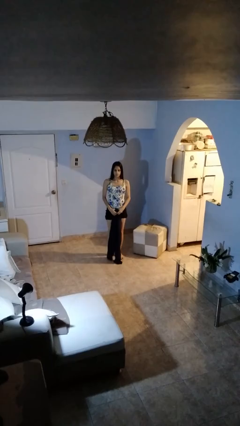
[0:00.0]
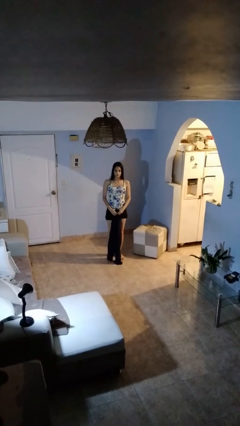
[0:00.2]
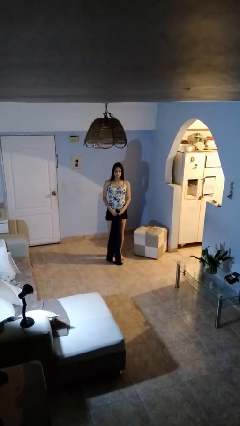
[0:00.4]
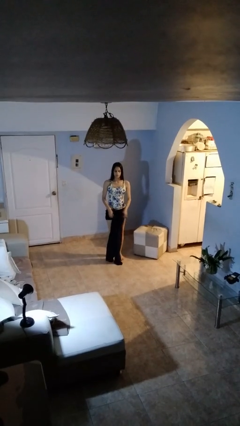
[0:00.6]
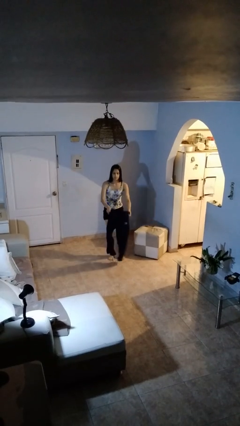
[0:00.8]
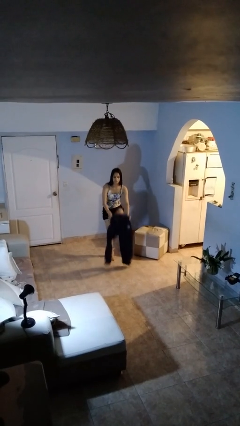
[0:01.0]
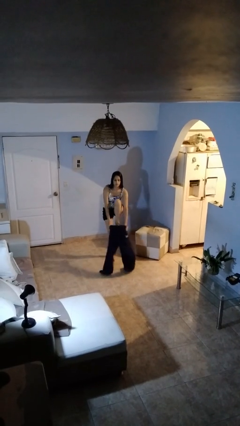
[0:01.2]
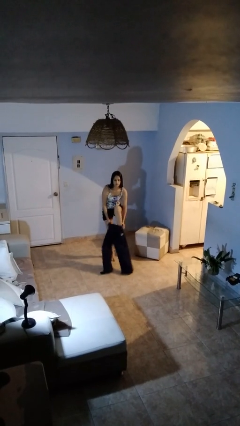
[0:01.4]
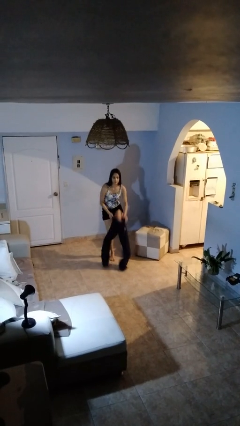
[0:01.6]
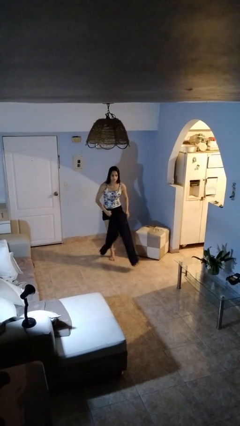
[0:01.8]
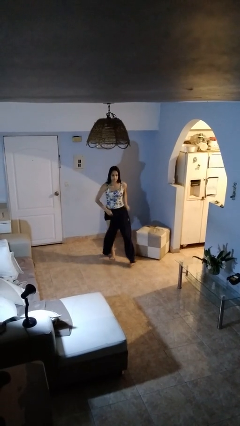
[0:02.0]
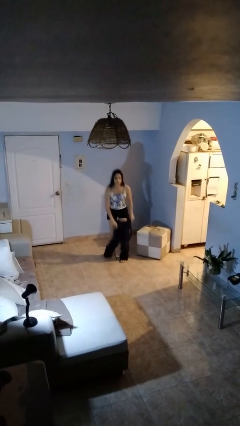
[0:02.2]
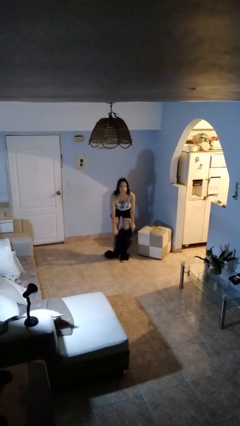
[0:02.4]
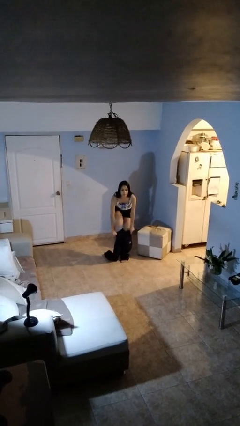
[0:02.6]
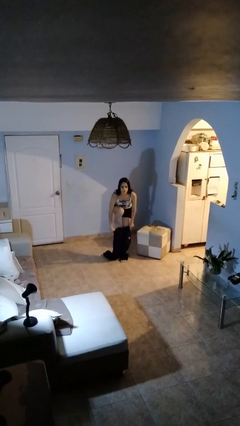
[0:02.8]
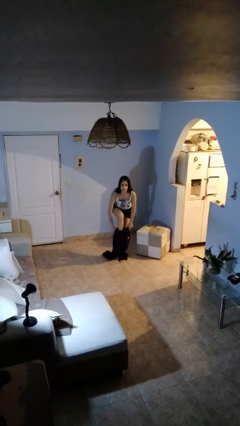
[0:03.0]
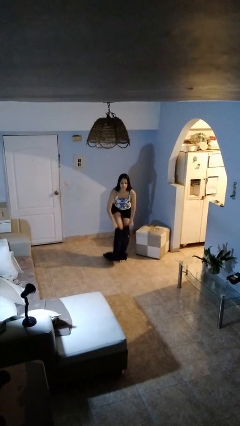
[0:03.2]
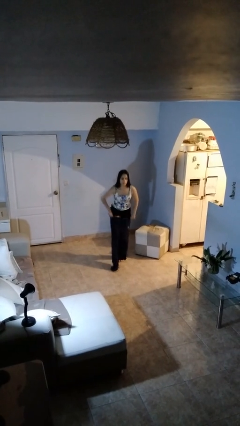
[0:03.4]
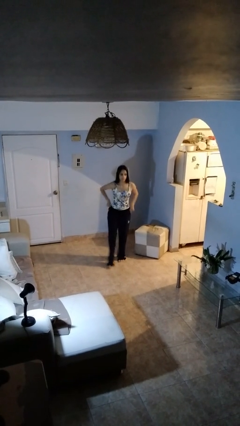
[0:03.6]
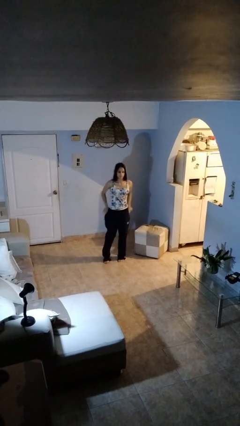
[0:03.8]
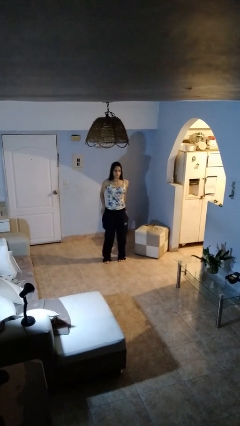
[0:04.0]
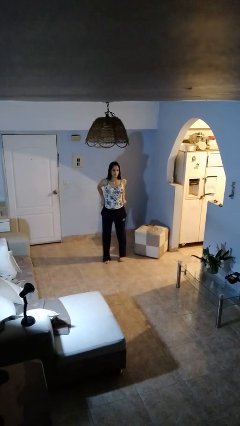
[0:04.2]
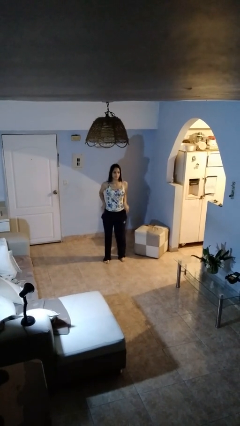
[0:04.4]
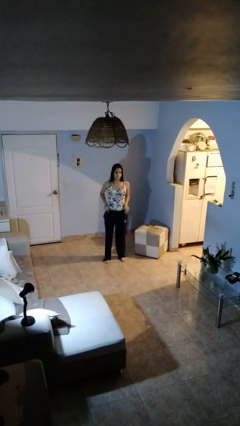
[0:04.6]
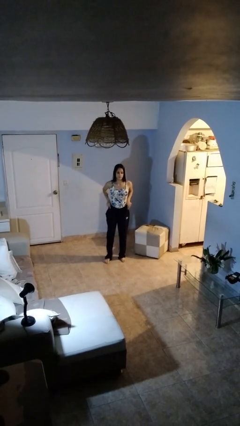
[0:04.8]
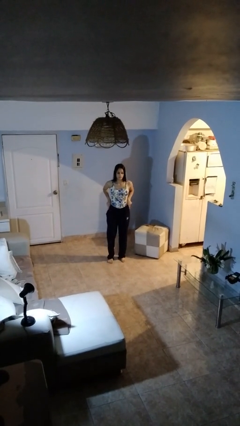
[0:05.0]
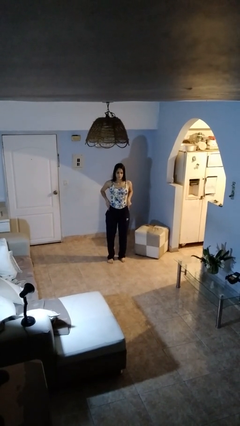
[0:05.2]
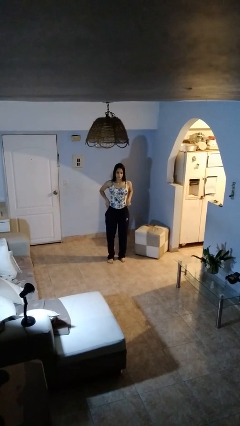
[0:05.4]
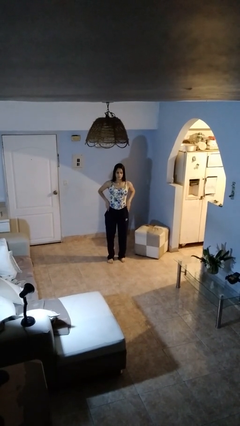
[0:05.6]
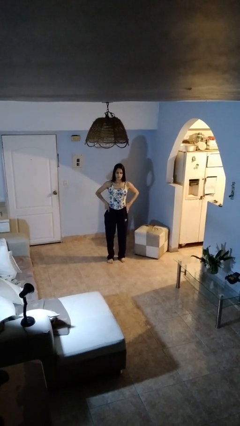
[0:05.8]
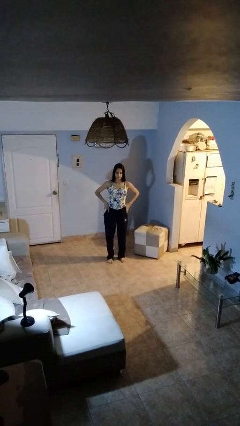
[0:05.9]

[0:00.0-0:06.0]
person takes off pants

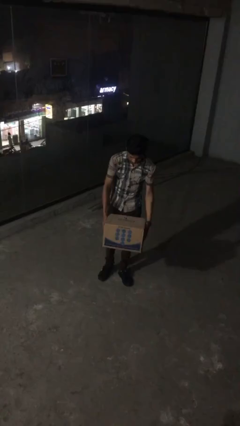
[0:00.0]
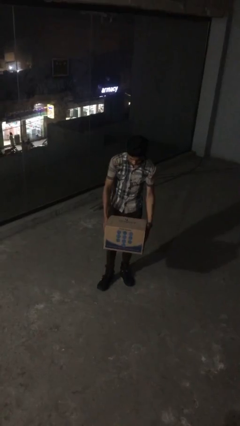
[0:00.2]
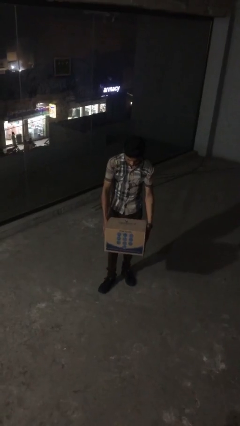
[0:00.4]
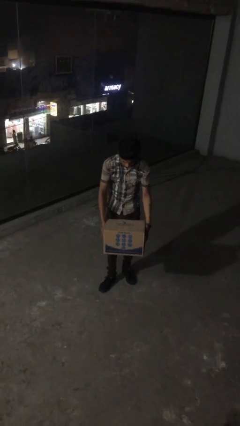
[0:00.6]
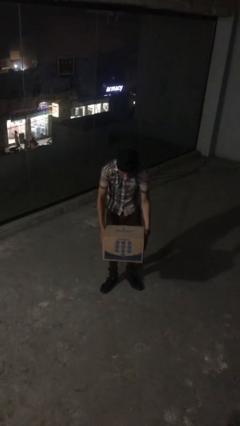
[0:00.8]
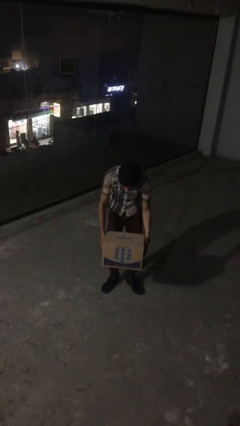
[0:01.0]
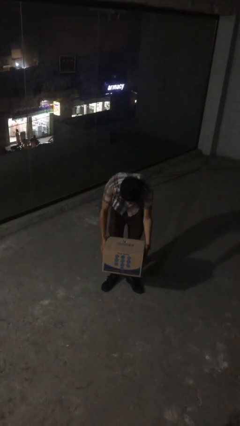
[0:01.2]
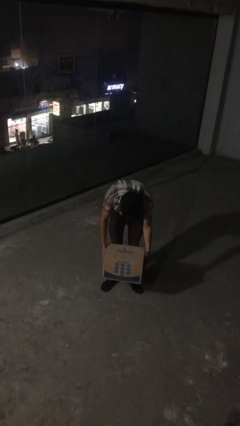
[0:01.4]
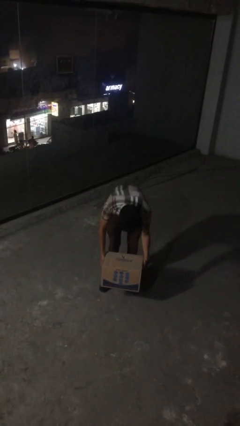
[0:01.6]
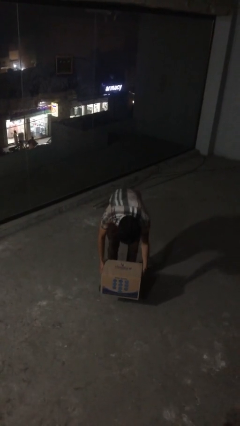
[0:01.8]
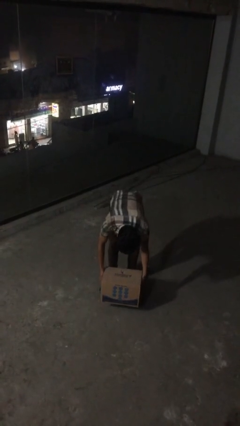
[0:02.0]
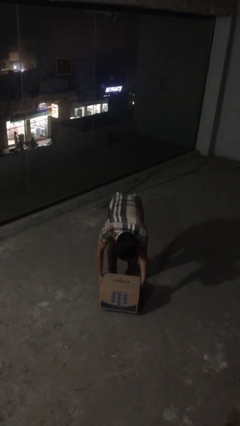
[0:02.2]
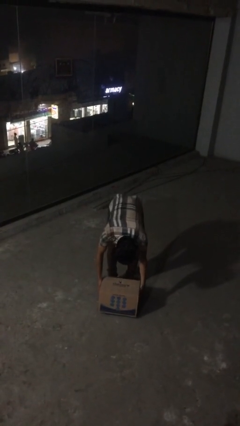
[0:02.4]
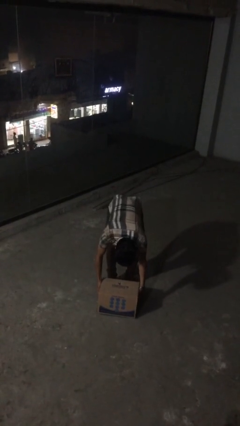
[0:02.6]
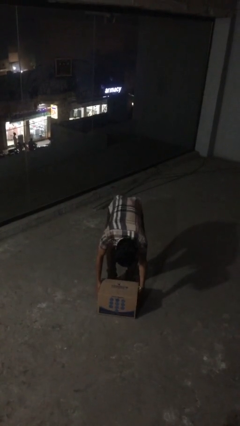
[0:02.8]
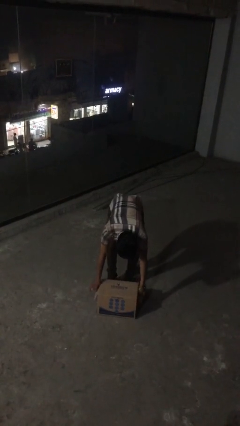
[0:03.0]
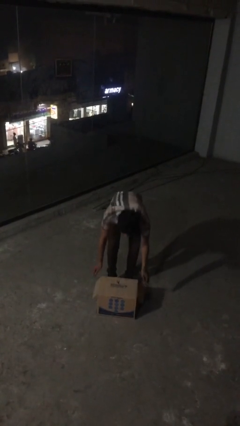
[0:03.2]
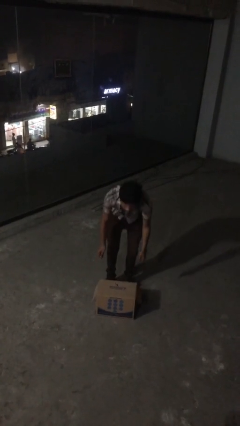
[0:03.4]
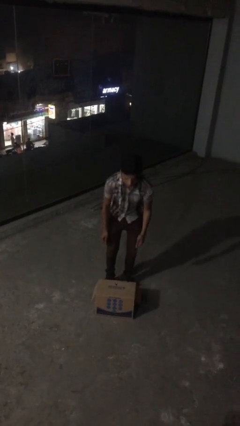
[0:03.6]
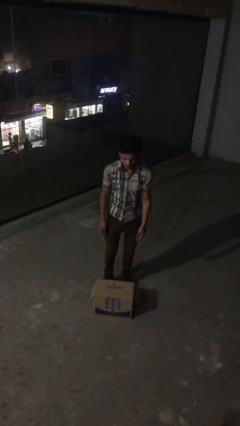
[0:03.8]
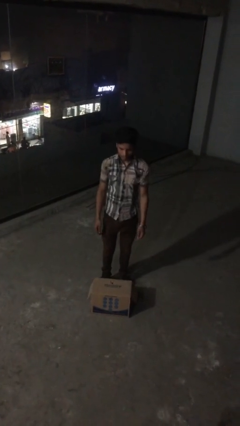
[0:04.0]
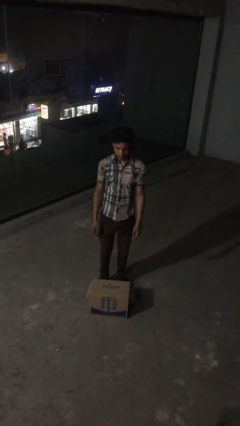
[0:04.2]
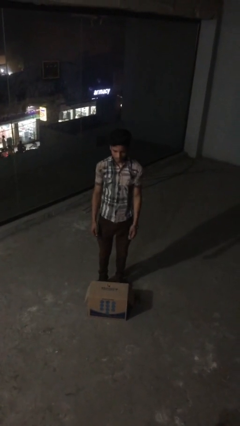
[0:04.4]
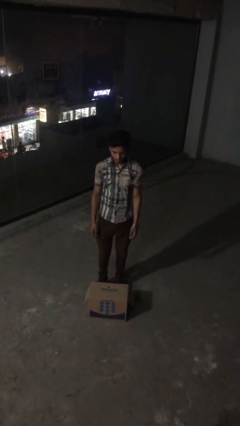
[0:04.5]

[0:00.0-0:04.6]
person puts down object on floor

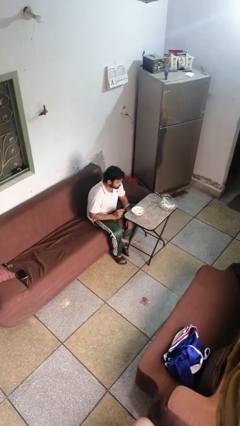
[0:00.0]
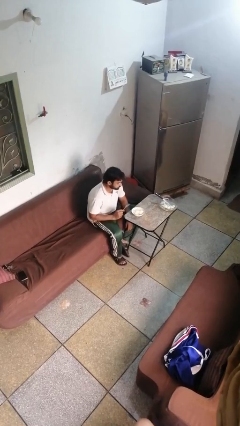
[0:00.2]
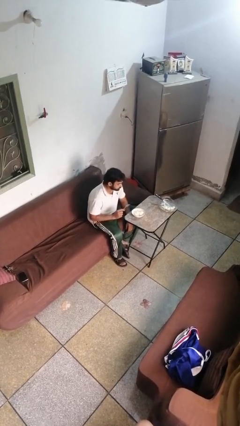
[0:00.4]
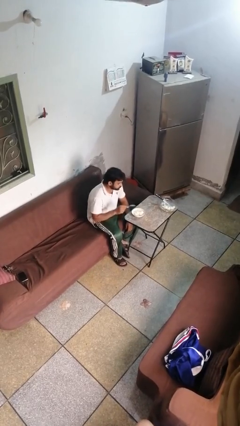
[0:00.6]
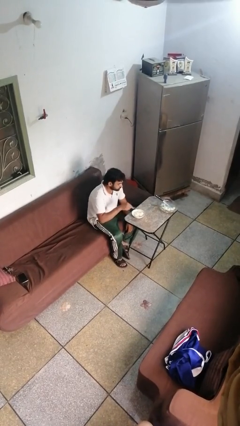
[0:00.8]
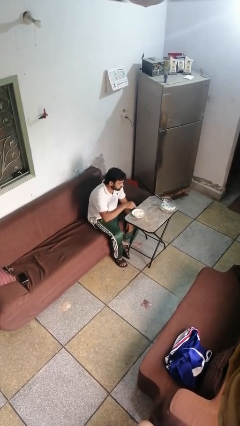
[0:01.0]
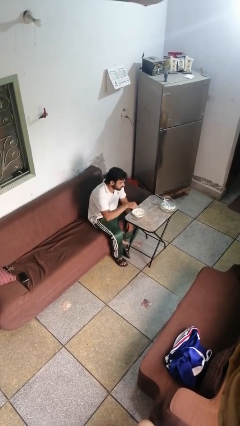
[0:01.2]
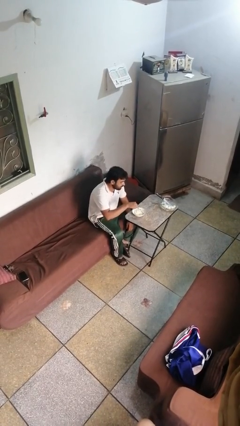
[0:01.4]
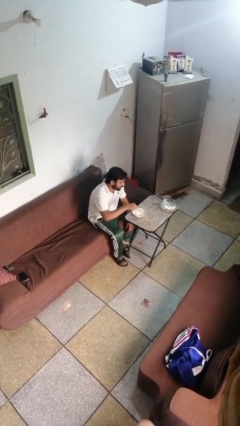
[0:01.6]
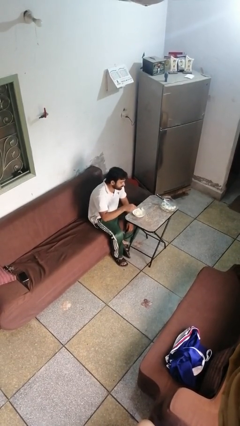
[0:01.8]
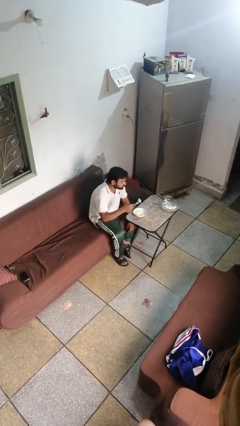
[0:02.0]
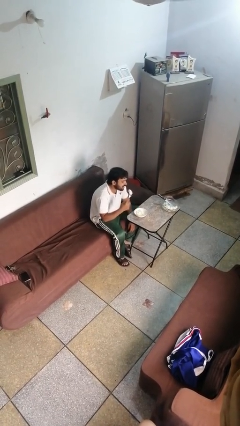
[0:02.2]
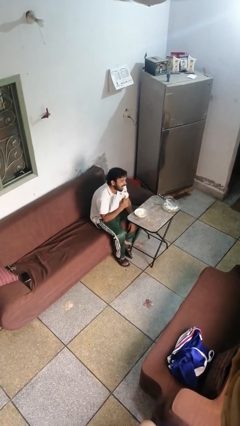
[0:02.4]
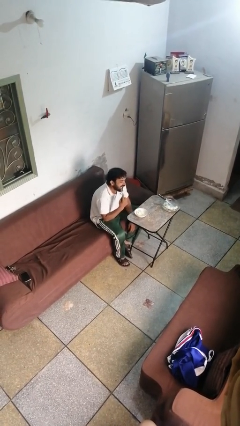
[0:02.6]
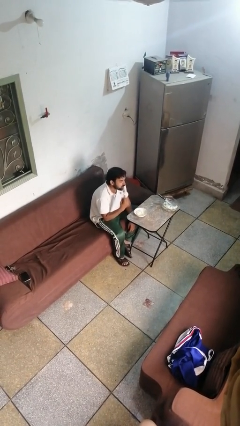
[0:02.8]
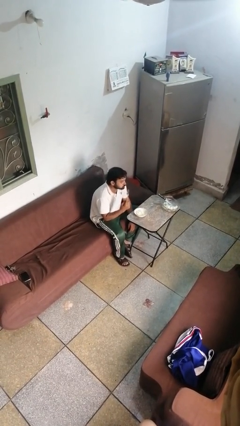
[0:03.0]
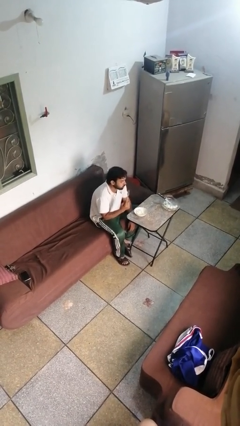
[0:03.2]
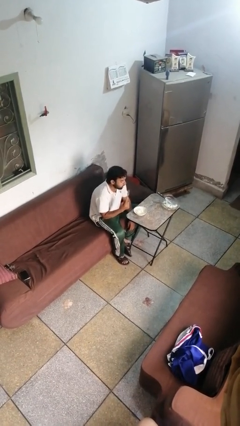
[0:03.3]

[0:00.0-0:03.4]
person eats with utensil

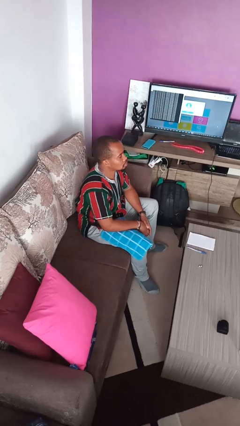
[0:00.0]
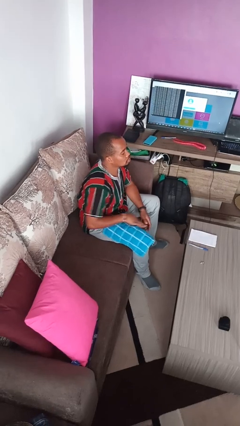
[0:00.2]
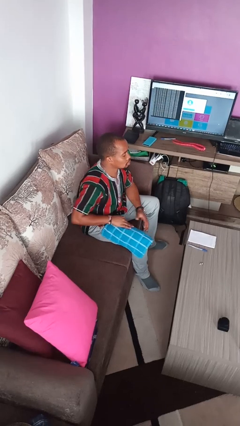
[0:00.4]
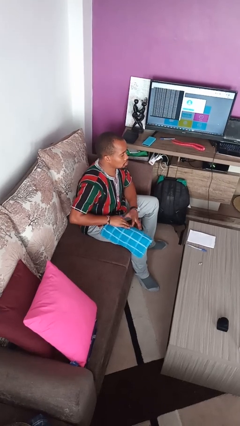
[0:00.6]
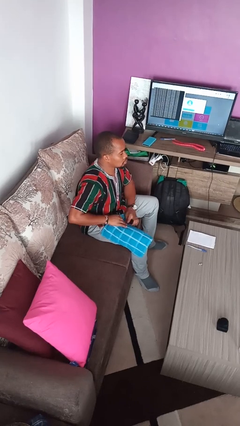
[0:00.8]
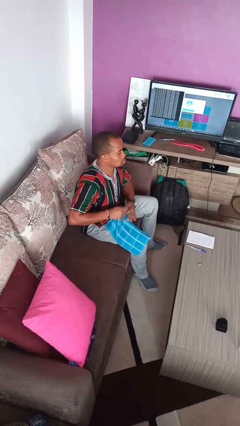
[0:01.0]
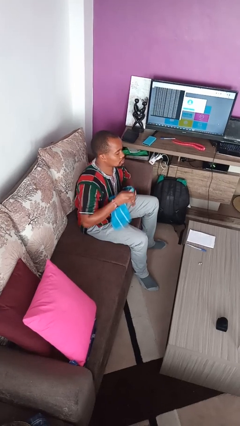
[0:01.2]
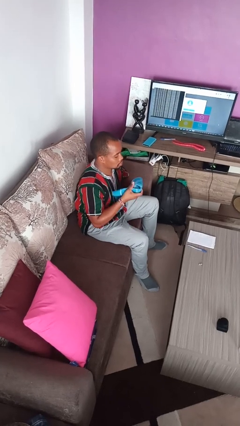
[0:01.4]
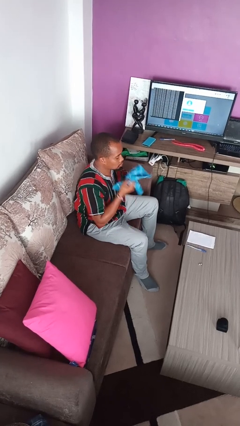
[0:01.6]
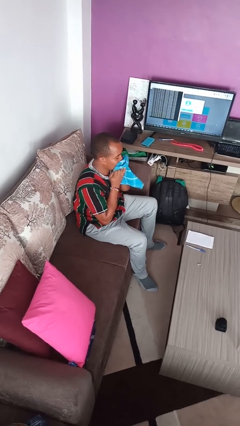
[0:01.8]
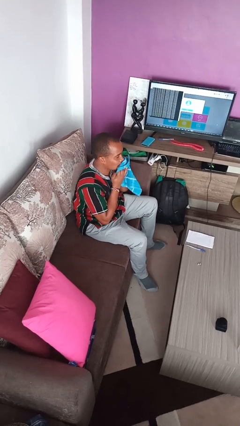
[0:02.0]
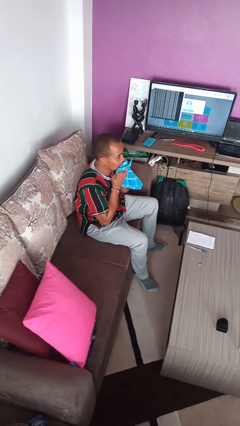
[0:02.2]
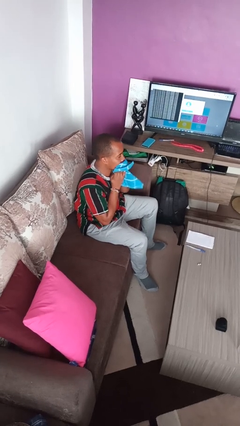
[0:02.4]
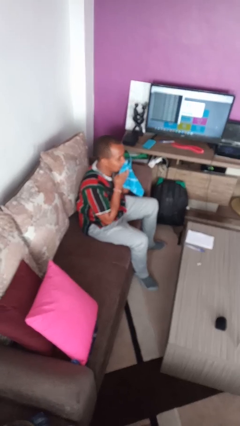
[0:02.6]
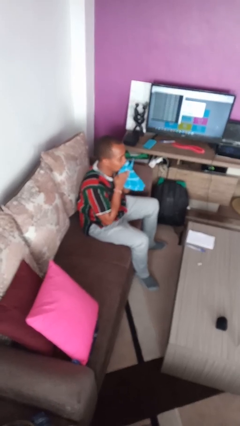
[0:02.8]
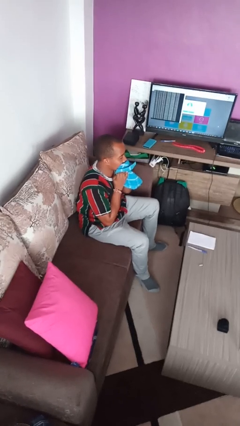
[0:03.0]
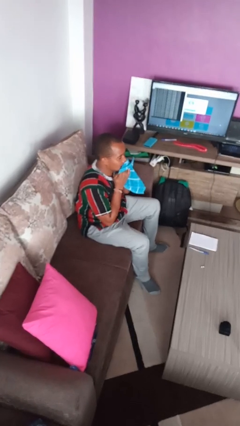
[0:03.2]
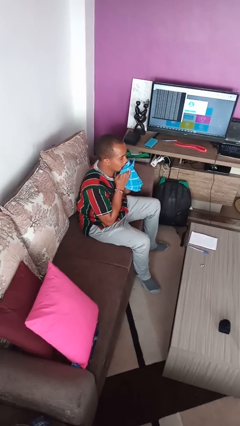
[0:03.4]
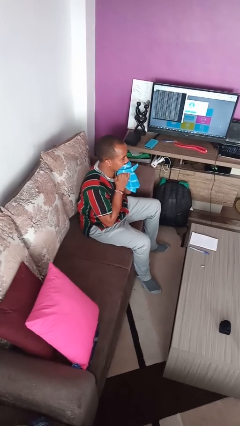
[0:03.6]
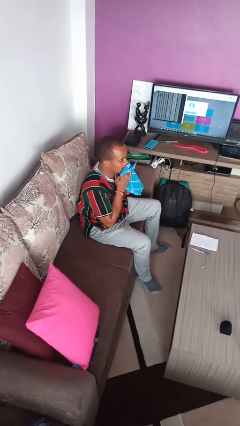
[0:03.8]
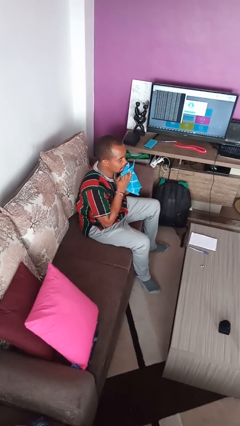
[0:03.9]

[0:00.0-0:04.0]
person wipes mouth with napkin
